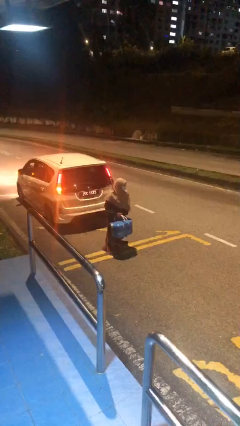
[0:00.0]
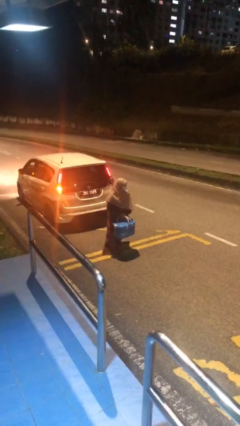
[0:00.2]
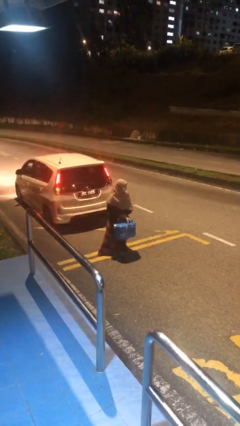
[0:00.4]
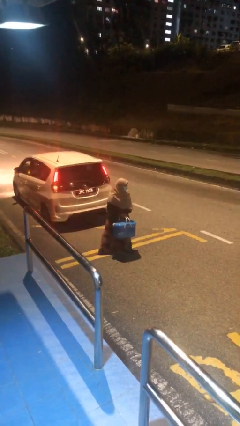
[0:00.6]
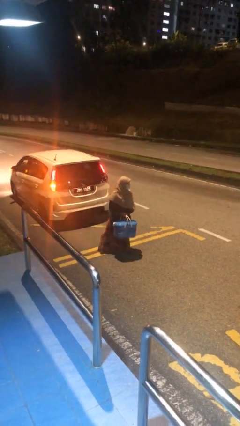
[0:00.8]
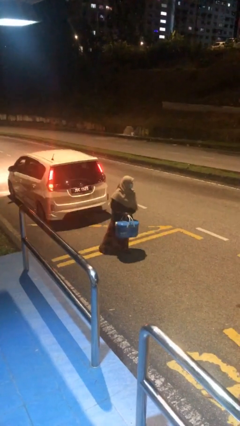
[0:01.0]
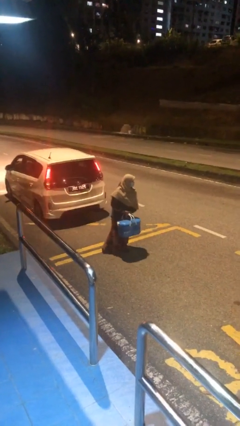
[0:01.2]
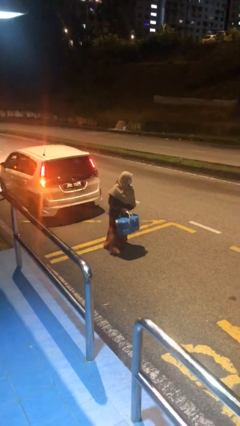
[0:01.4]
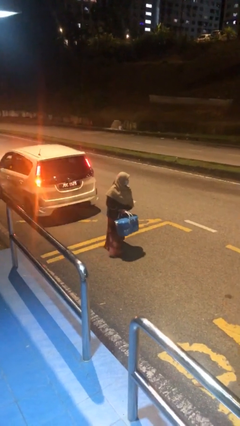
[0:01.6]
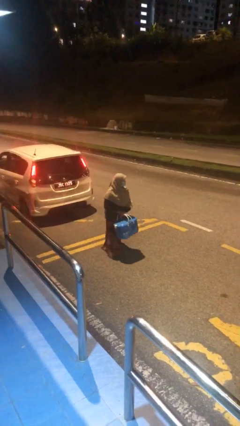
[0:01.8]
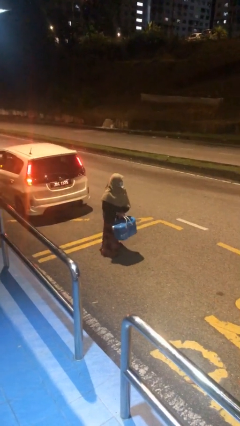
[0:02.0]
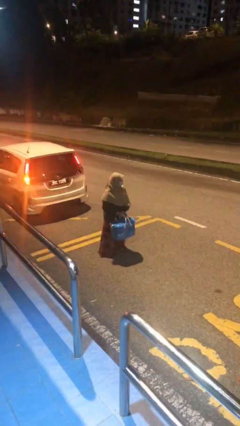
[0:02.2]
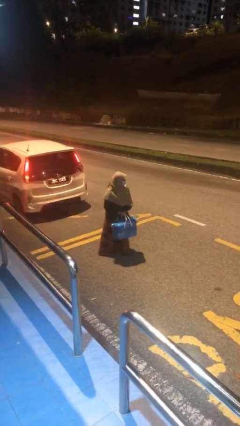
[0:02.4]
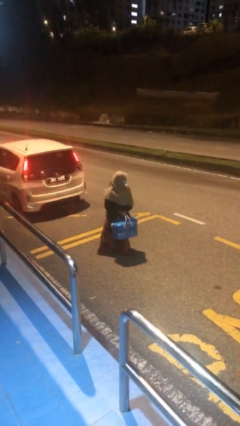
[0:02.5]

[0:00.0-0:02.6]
person carries heavy object

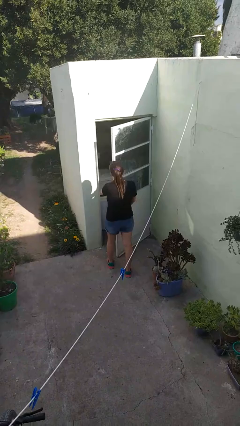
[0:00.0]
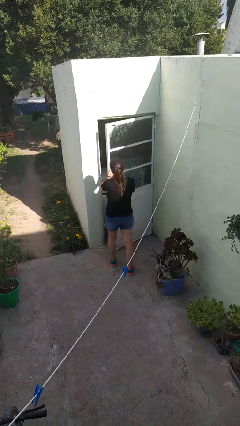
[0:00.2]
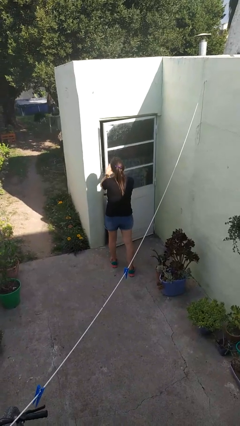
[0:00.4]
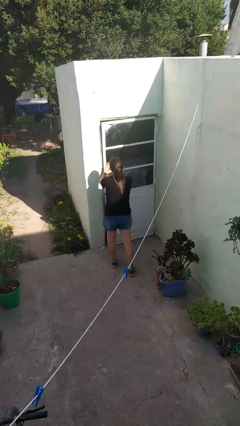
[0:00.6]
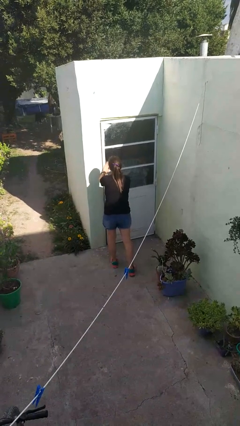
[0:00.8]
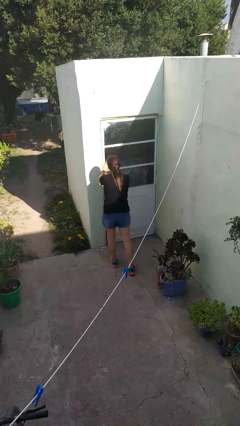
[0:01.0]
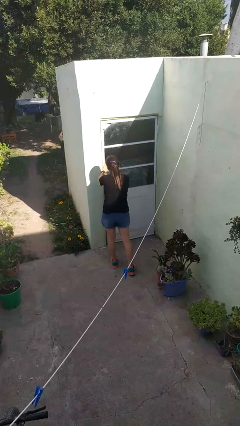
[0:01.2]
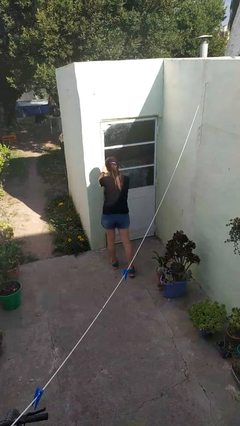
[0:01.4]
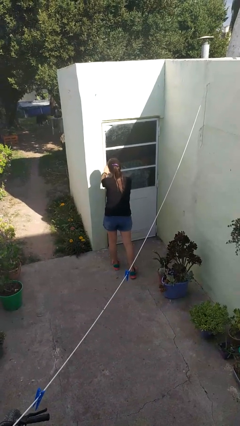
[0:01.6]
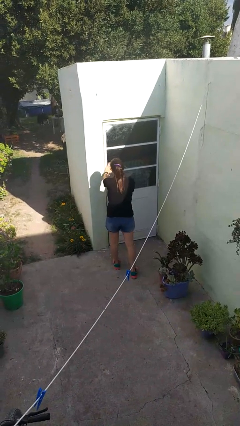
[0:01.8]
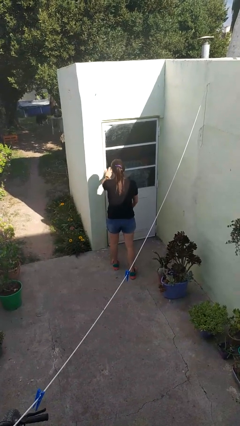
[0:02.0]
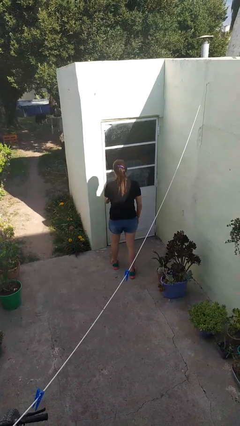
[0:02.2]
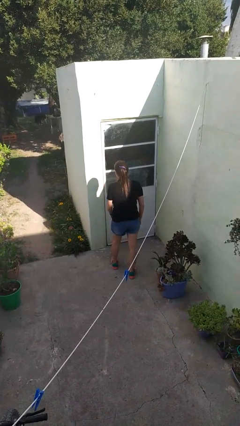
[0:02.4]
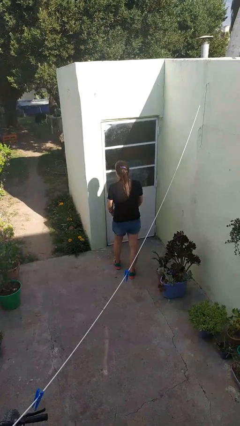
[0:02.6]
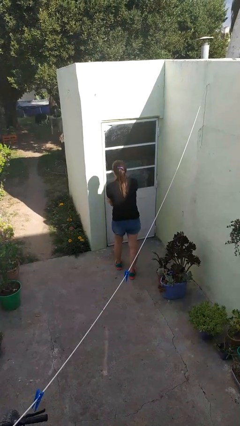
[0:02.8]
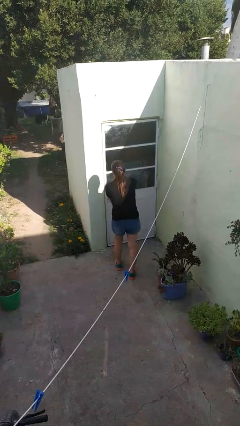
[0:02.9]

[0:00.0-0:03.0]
person closes facility door

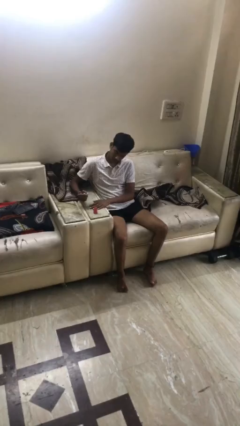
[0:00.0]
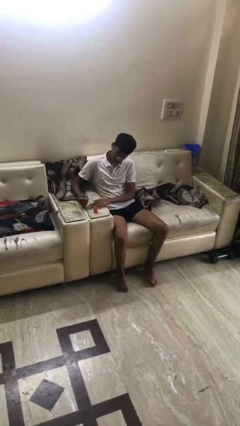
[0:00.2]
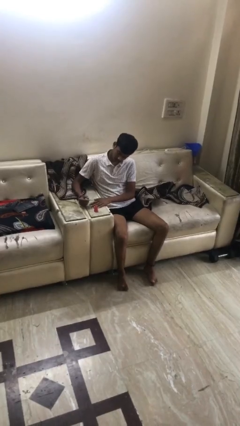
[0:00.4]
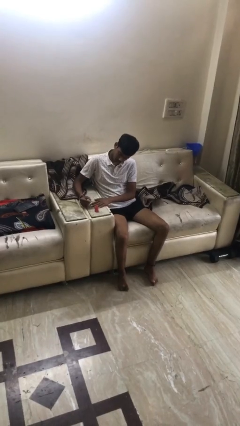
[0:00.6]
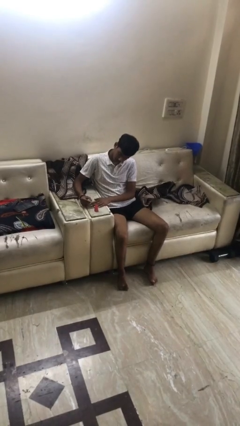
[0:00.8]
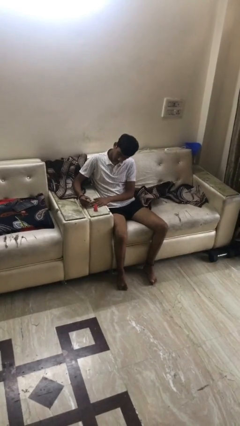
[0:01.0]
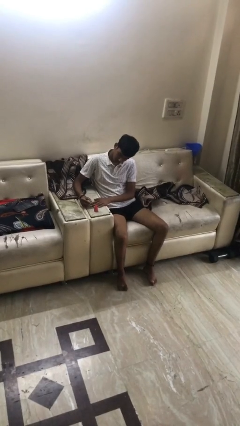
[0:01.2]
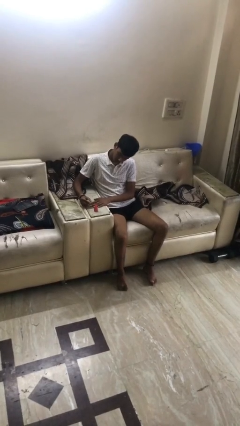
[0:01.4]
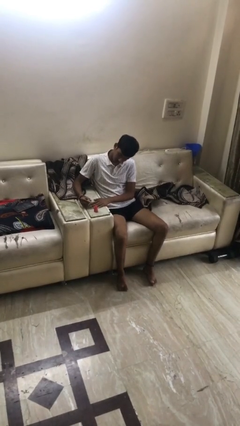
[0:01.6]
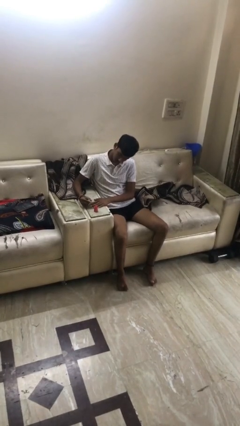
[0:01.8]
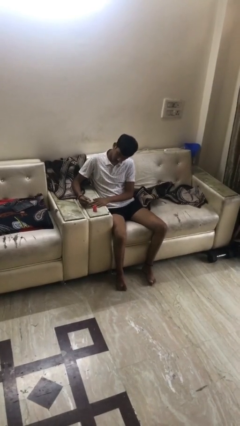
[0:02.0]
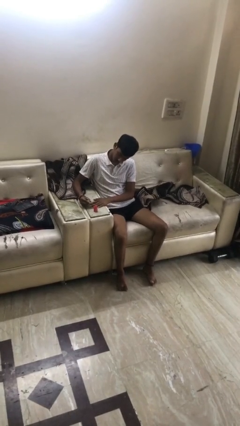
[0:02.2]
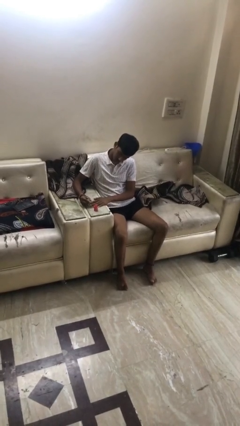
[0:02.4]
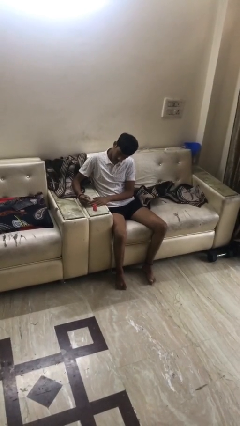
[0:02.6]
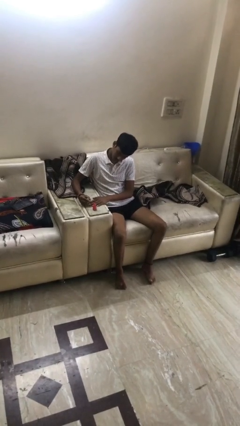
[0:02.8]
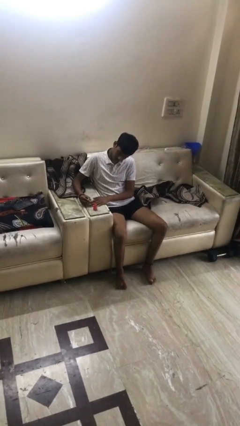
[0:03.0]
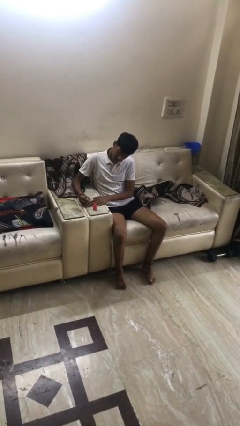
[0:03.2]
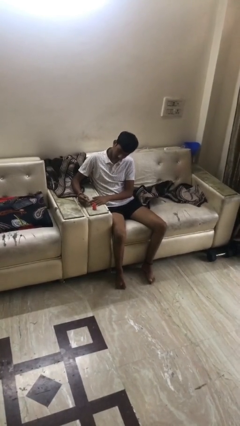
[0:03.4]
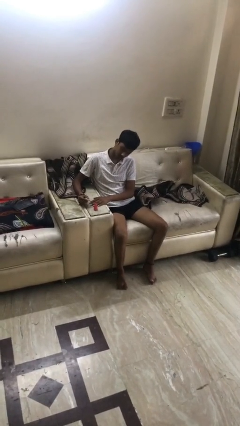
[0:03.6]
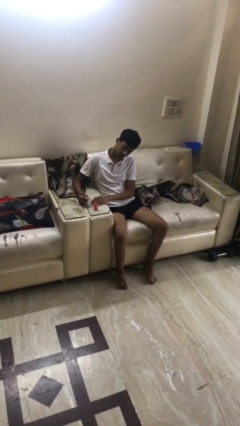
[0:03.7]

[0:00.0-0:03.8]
person paints fingernails

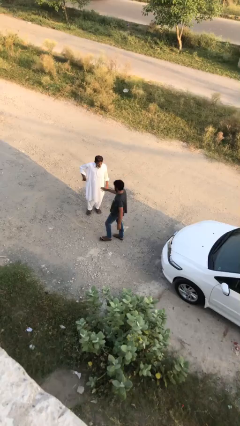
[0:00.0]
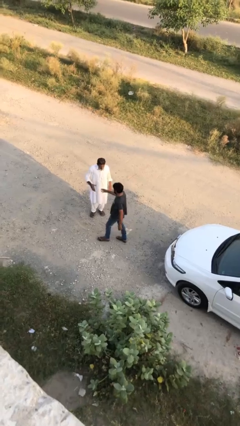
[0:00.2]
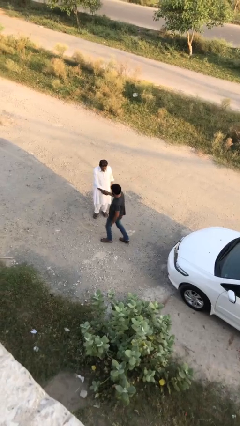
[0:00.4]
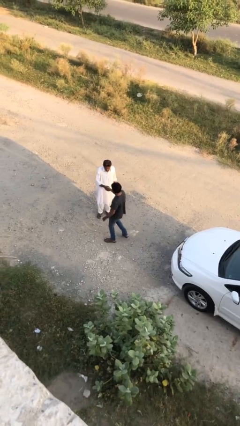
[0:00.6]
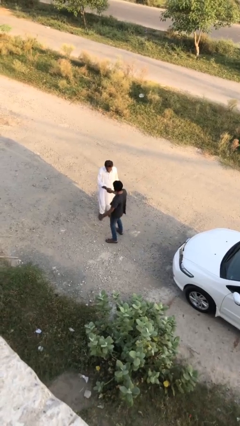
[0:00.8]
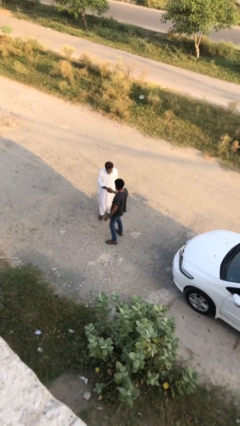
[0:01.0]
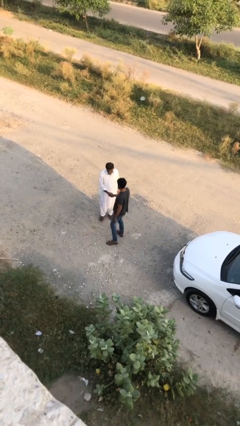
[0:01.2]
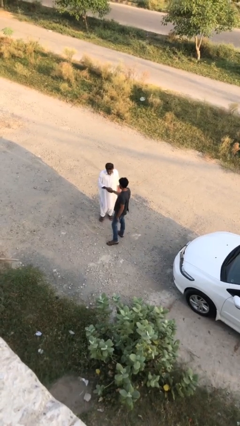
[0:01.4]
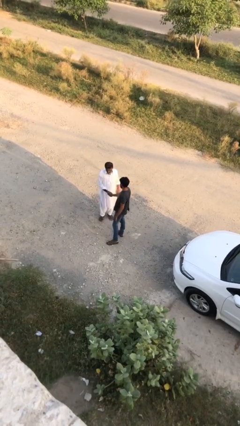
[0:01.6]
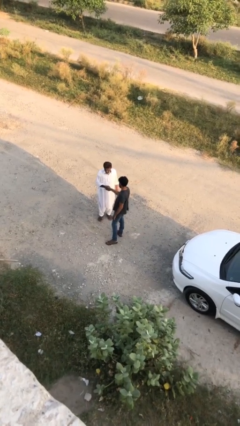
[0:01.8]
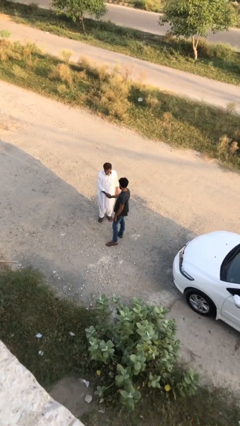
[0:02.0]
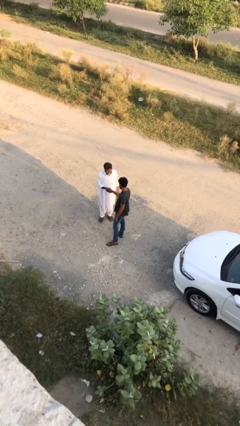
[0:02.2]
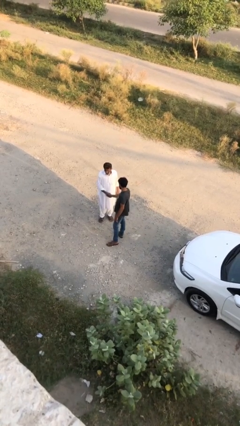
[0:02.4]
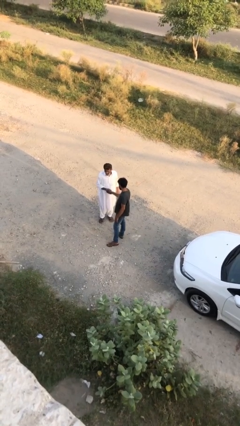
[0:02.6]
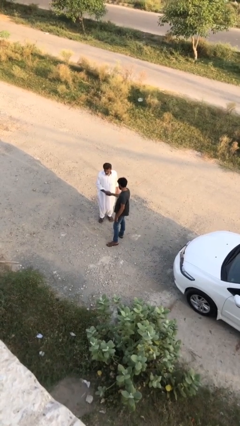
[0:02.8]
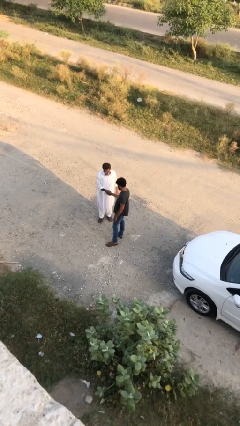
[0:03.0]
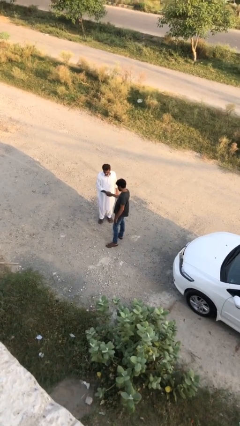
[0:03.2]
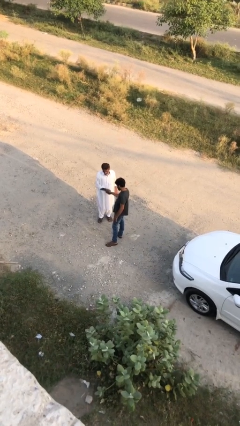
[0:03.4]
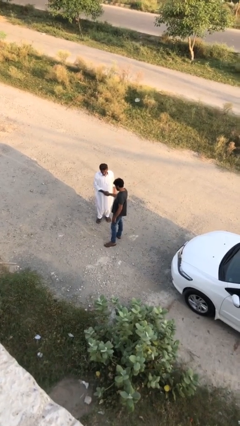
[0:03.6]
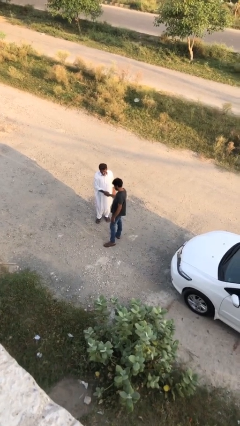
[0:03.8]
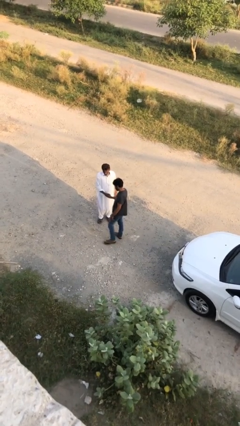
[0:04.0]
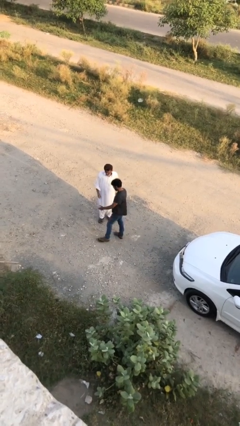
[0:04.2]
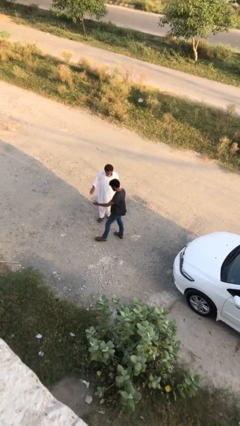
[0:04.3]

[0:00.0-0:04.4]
person shakes hand

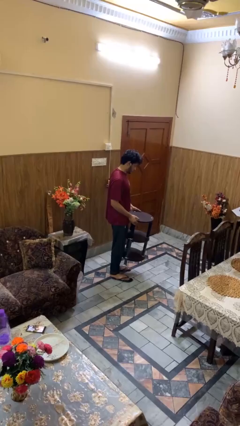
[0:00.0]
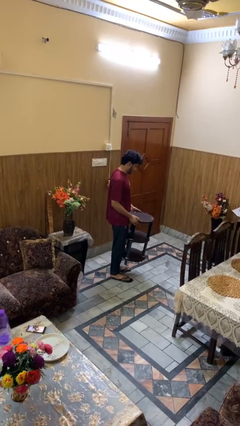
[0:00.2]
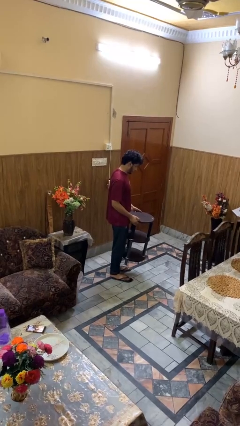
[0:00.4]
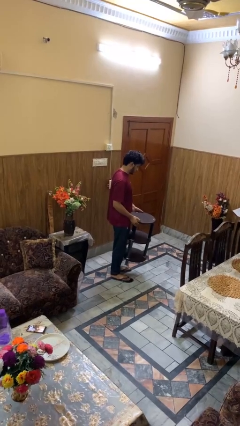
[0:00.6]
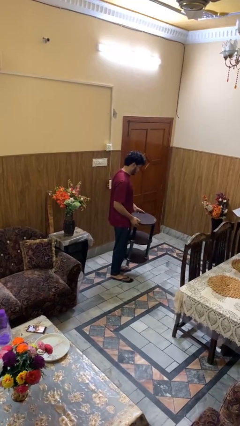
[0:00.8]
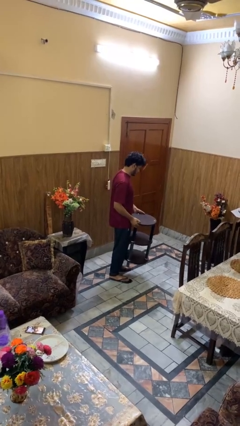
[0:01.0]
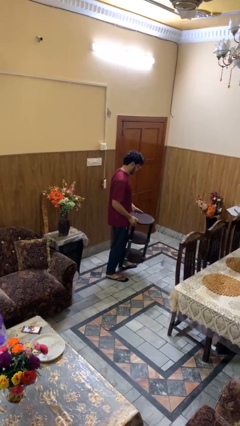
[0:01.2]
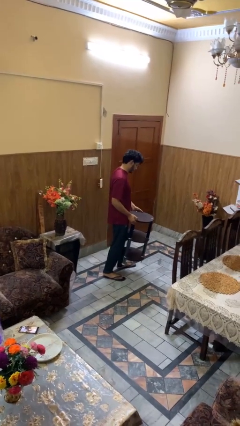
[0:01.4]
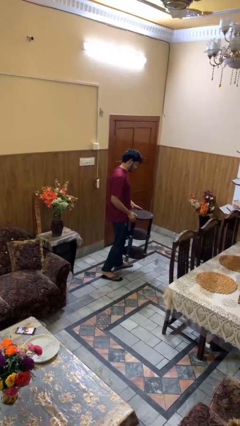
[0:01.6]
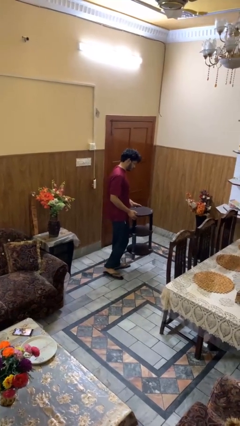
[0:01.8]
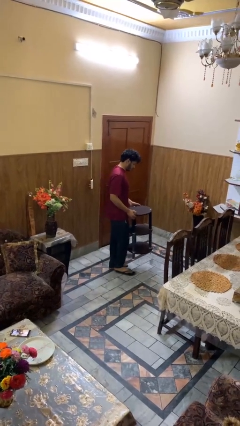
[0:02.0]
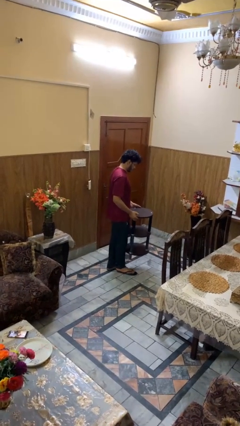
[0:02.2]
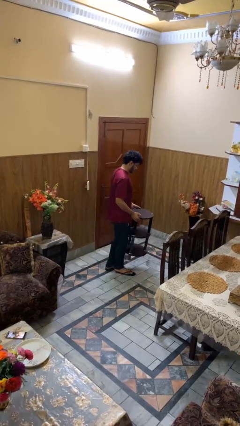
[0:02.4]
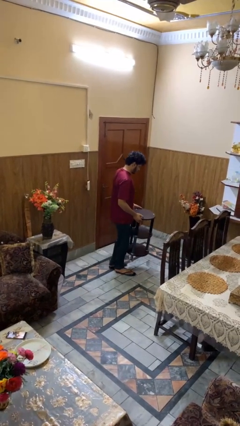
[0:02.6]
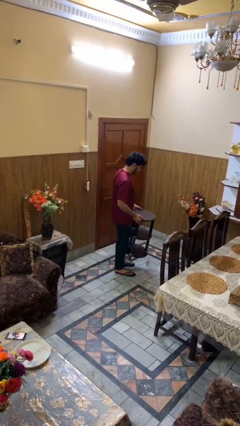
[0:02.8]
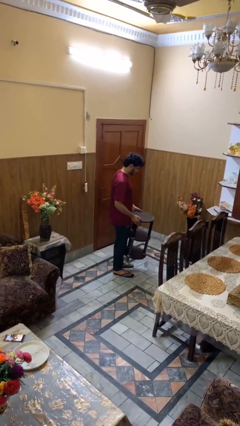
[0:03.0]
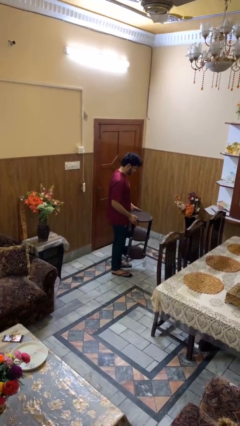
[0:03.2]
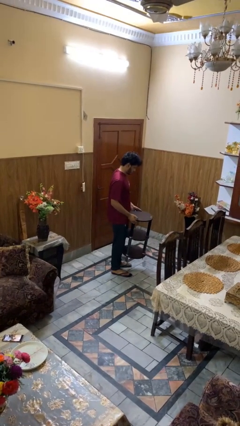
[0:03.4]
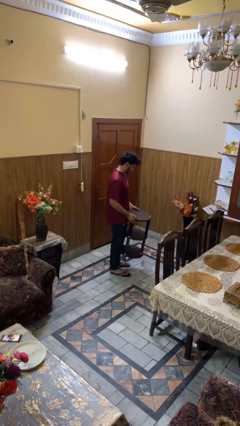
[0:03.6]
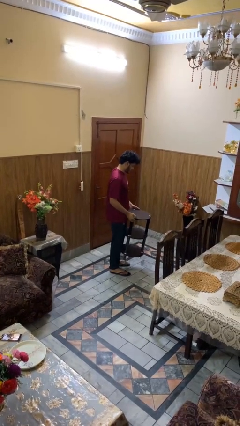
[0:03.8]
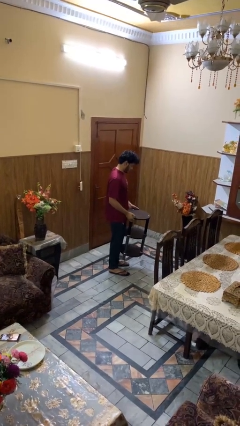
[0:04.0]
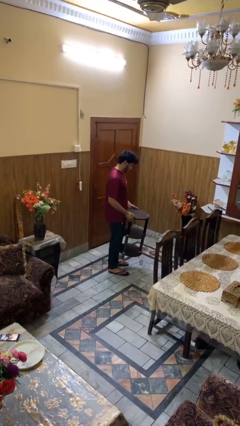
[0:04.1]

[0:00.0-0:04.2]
person carries furniture
